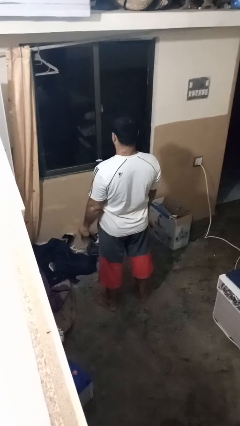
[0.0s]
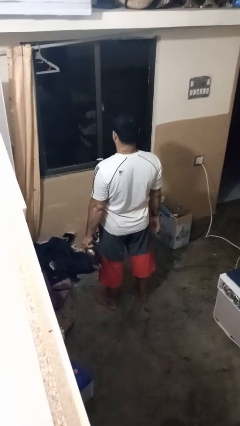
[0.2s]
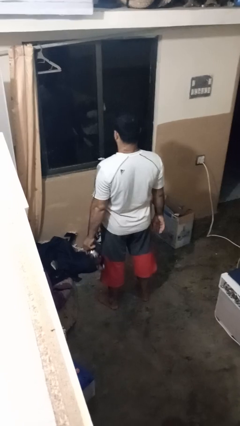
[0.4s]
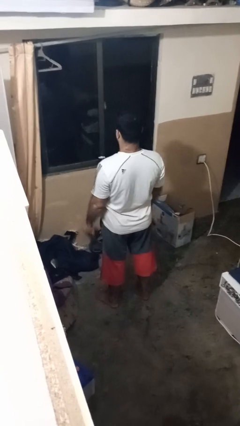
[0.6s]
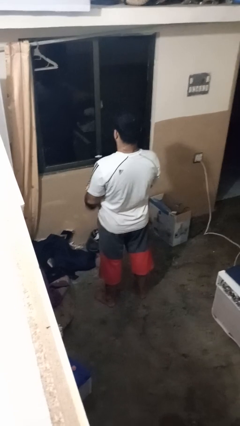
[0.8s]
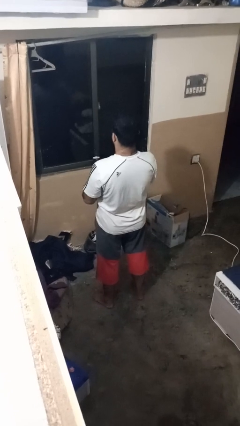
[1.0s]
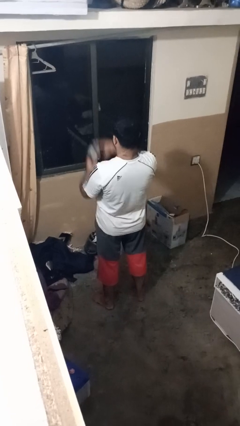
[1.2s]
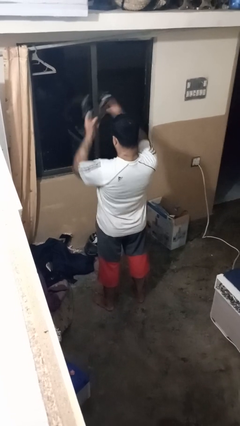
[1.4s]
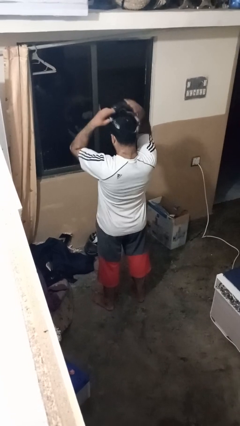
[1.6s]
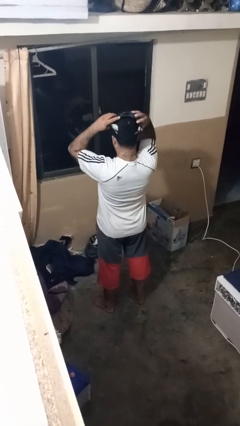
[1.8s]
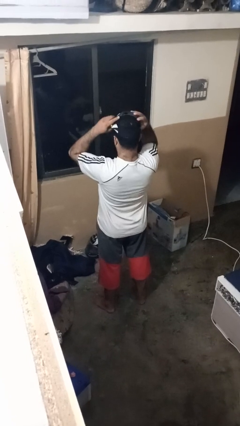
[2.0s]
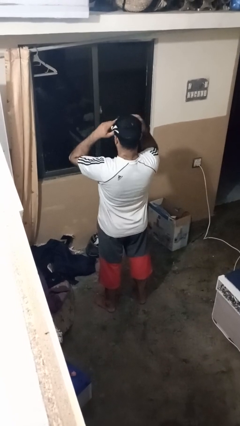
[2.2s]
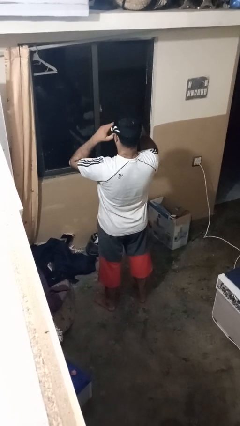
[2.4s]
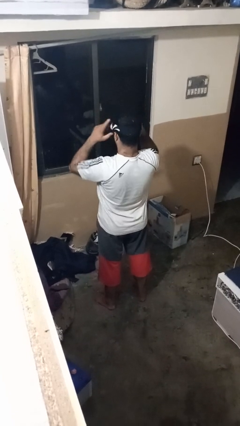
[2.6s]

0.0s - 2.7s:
person puts on sunglasses

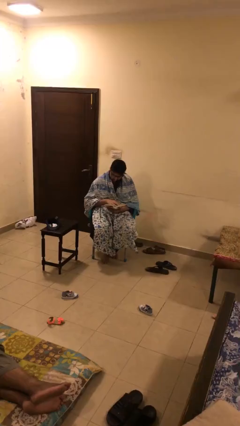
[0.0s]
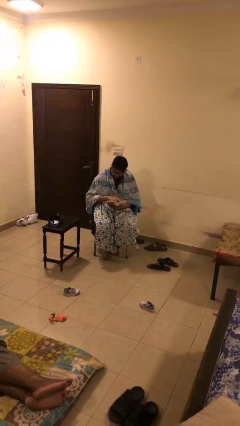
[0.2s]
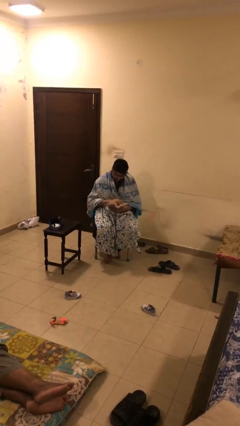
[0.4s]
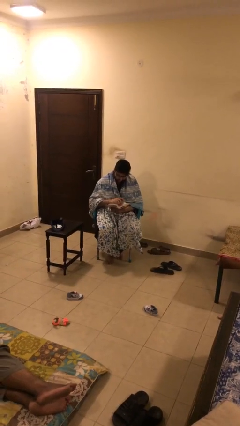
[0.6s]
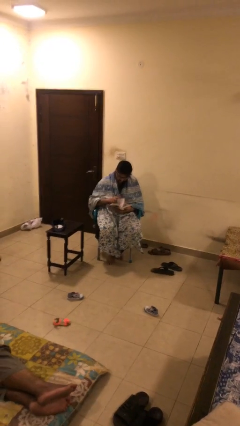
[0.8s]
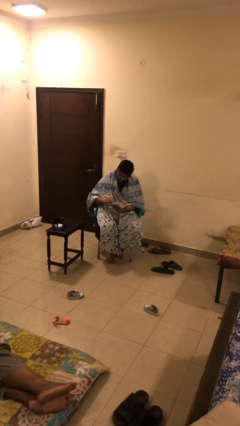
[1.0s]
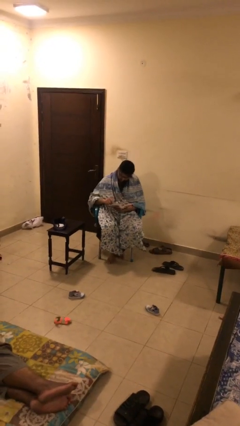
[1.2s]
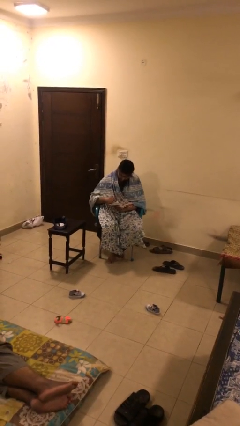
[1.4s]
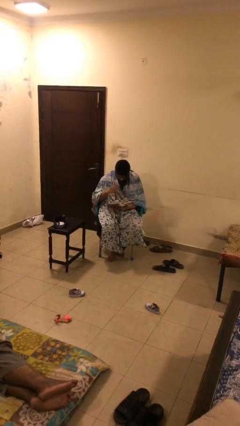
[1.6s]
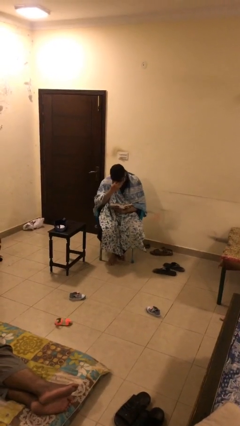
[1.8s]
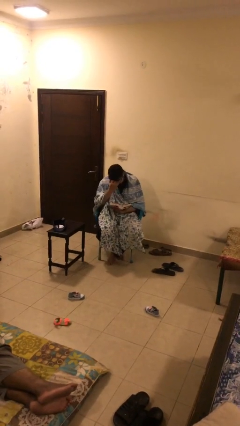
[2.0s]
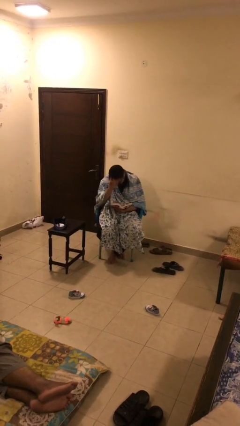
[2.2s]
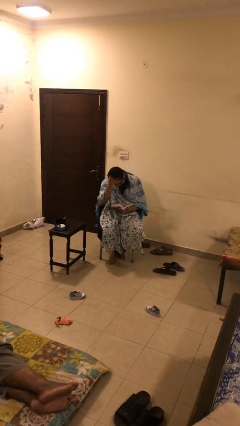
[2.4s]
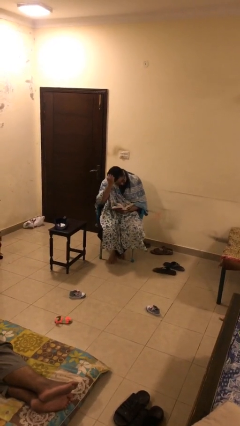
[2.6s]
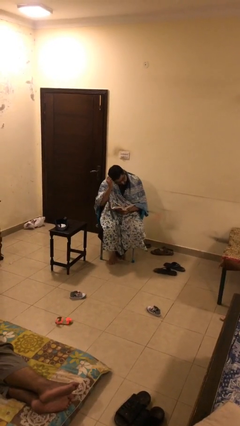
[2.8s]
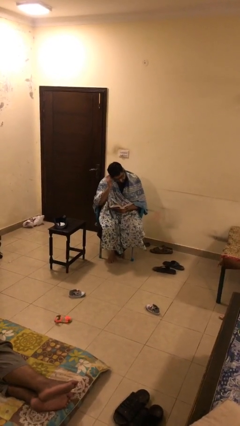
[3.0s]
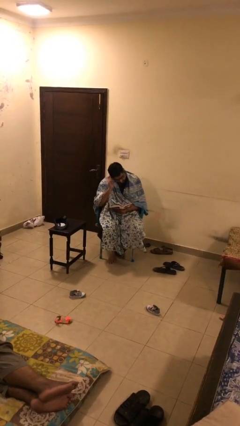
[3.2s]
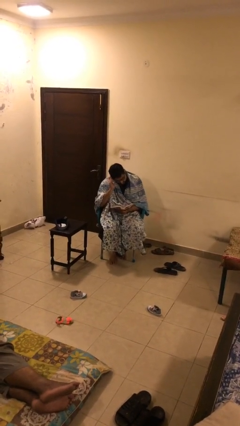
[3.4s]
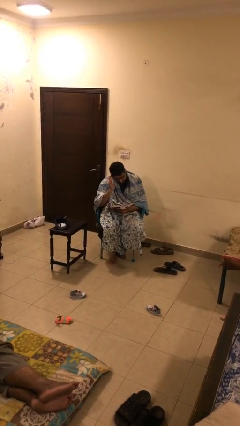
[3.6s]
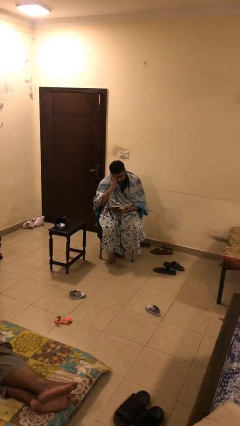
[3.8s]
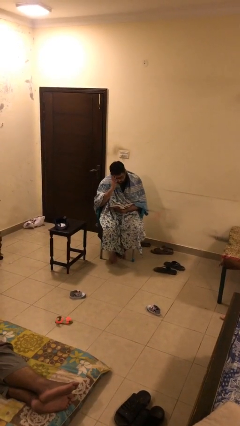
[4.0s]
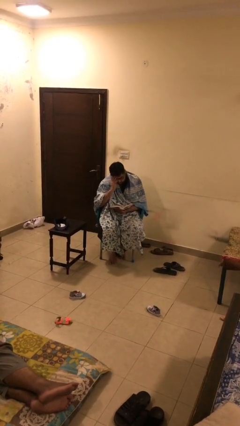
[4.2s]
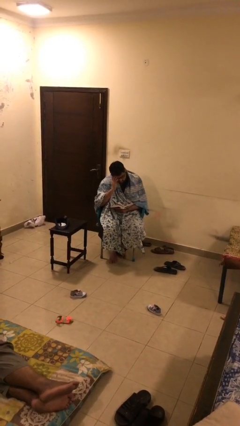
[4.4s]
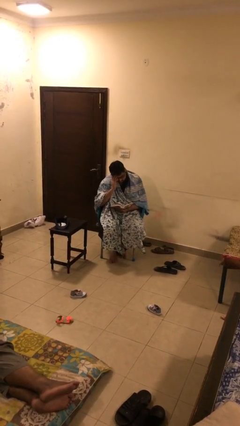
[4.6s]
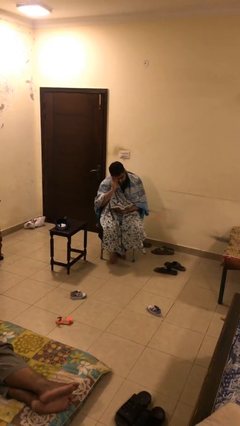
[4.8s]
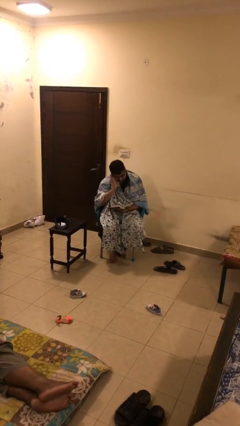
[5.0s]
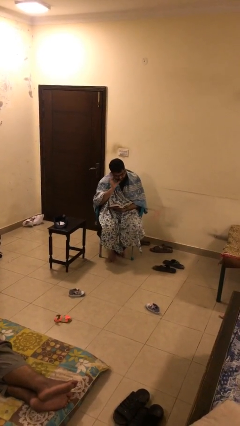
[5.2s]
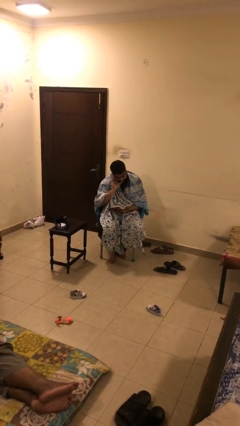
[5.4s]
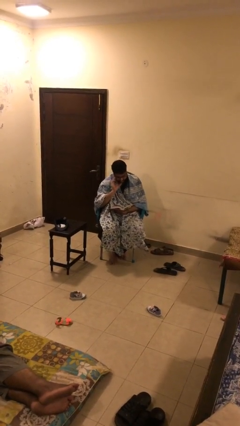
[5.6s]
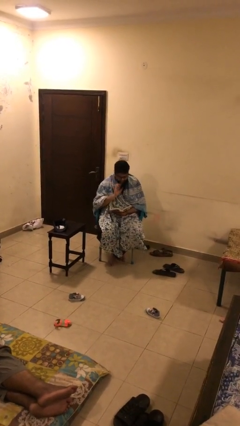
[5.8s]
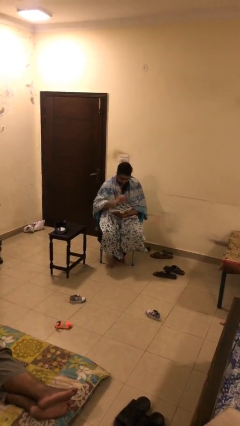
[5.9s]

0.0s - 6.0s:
person reads document

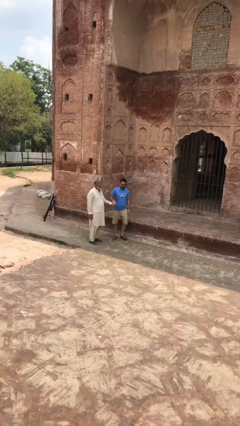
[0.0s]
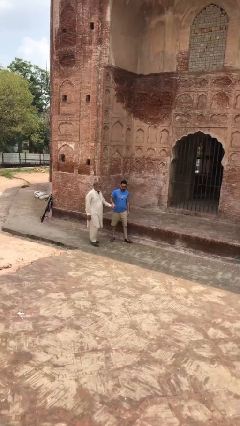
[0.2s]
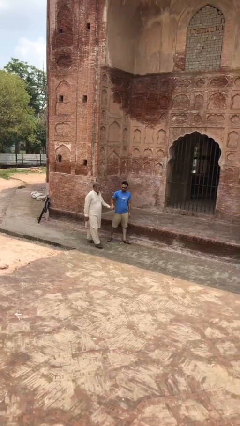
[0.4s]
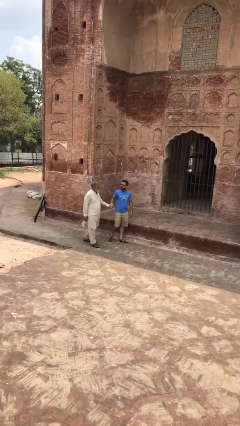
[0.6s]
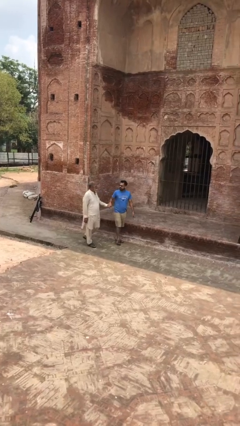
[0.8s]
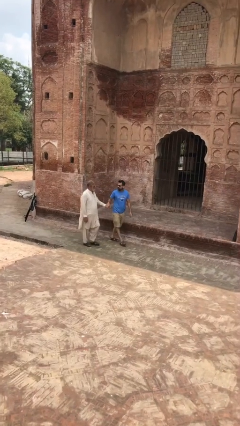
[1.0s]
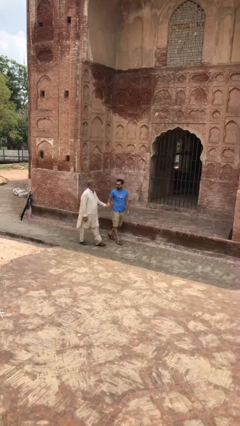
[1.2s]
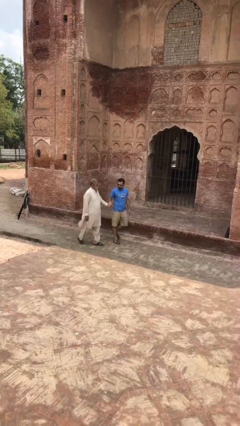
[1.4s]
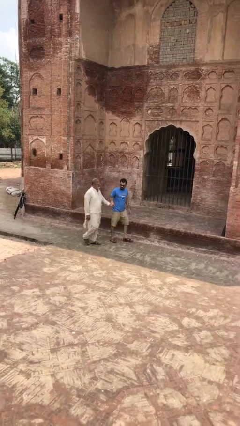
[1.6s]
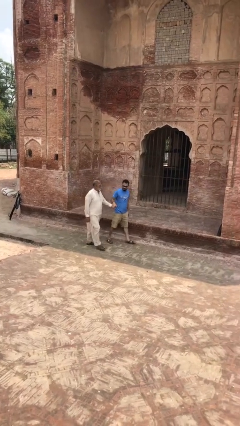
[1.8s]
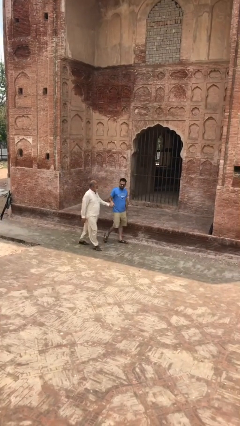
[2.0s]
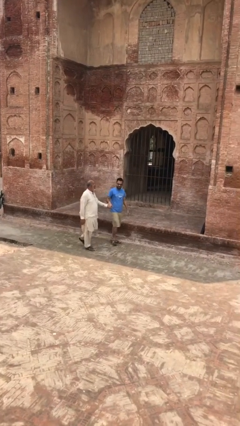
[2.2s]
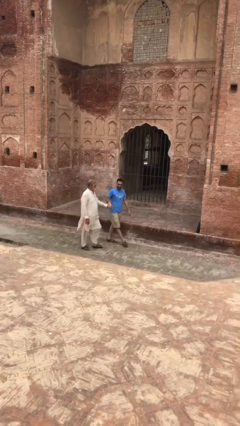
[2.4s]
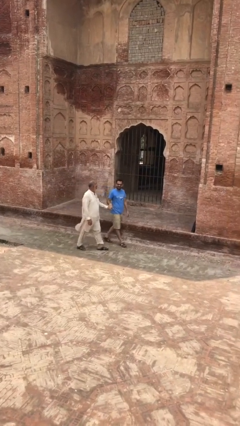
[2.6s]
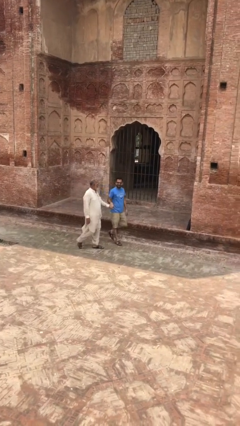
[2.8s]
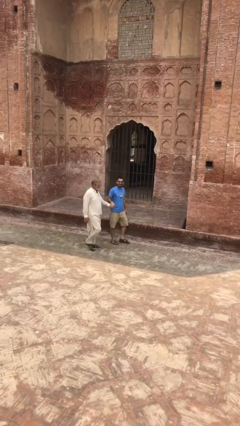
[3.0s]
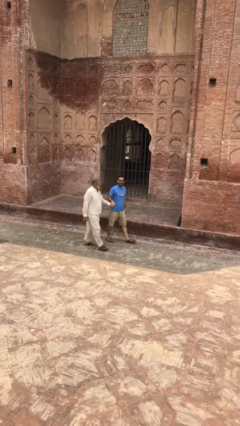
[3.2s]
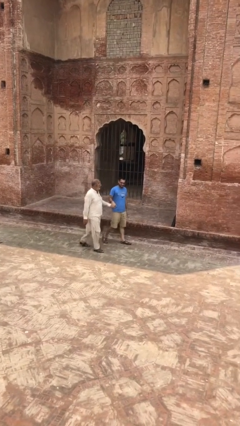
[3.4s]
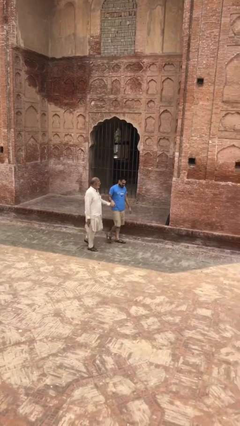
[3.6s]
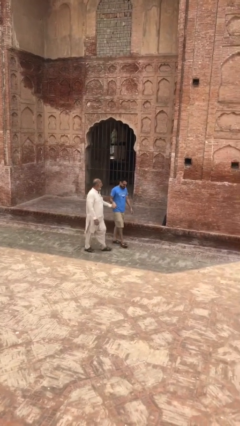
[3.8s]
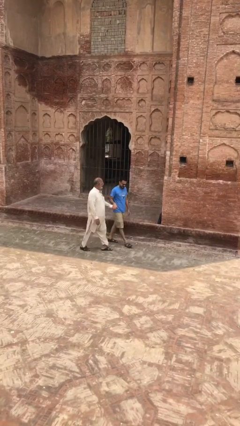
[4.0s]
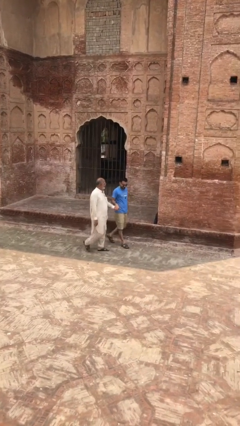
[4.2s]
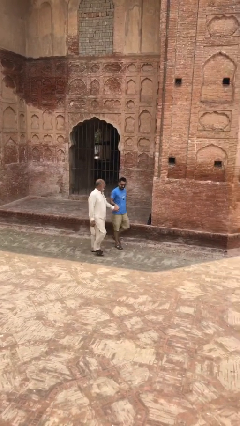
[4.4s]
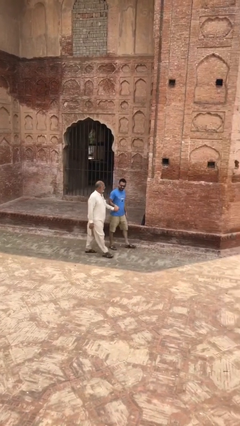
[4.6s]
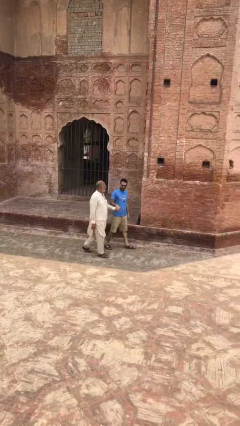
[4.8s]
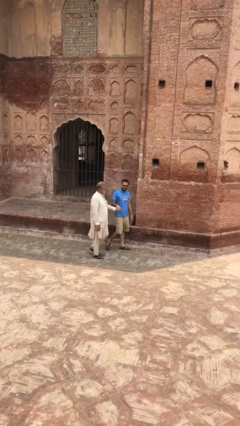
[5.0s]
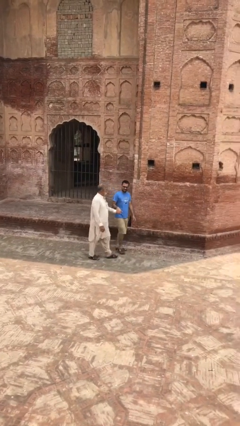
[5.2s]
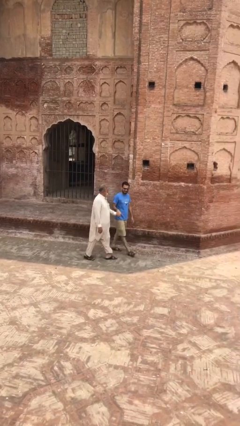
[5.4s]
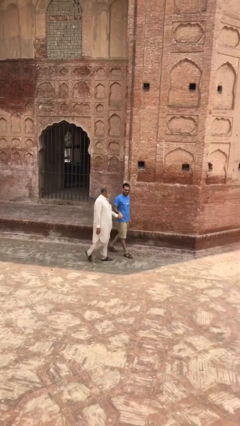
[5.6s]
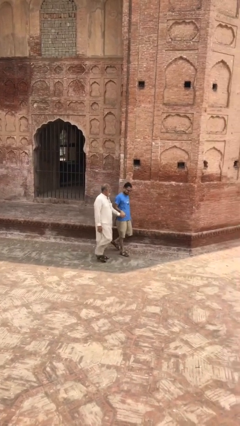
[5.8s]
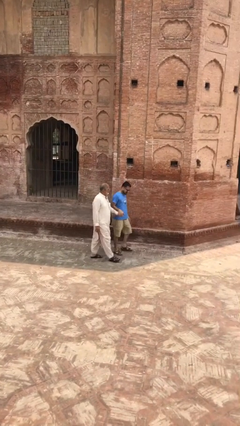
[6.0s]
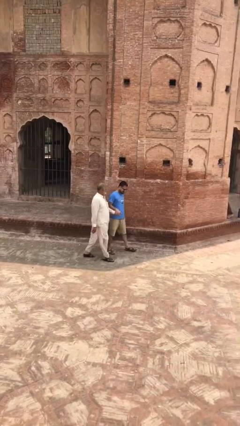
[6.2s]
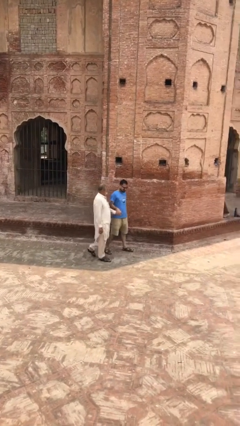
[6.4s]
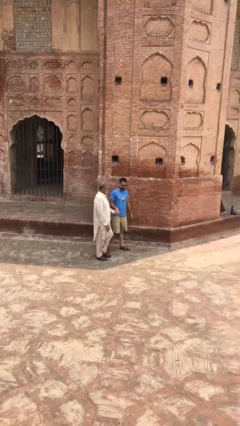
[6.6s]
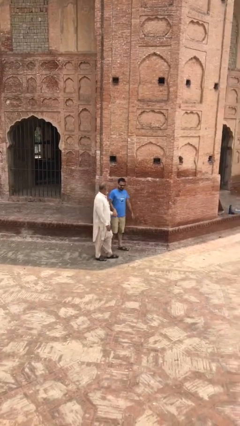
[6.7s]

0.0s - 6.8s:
person holds hand

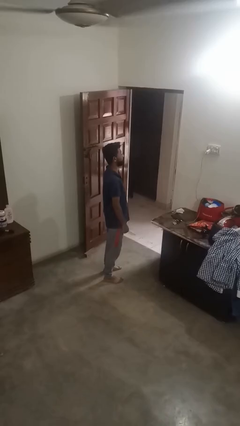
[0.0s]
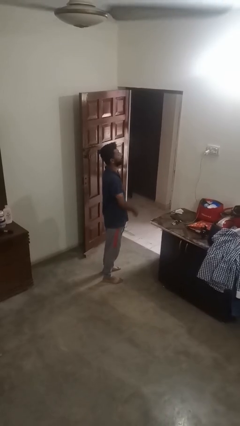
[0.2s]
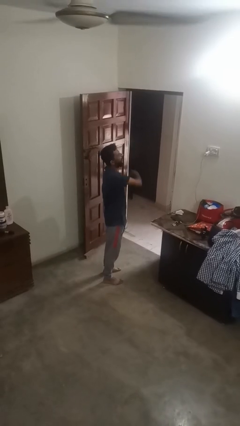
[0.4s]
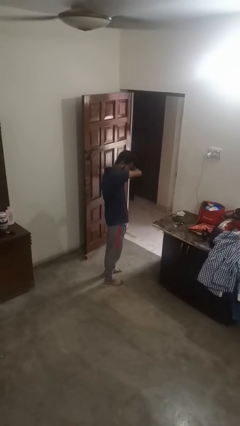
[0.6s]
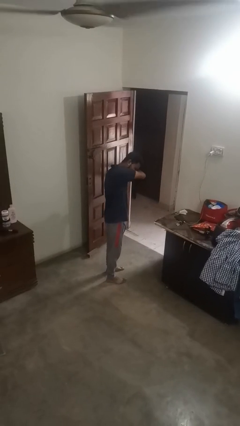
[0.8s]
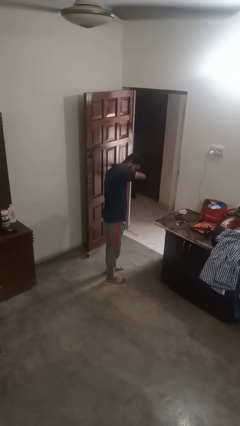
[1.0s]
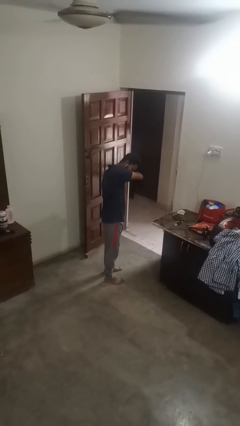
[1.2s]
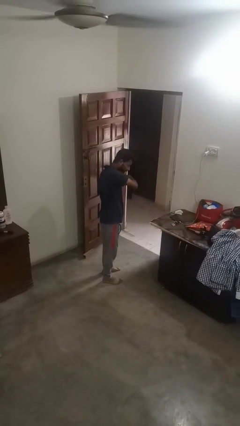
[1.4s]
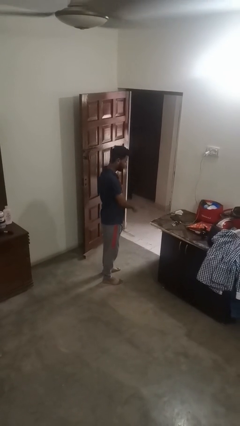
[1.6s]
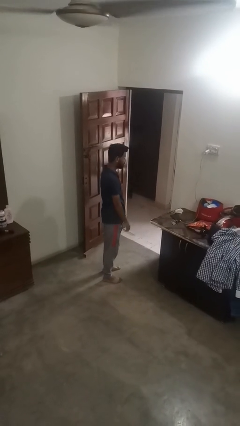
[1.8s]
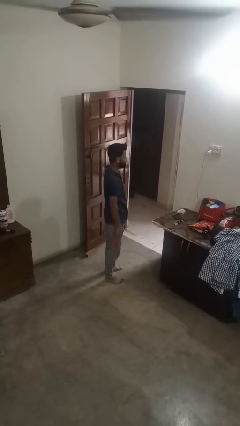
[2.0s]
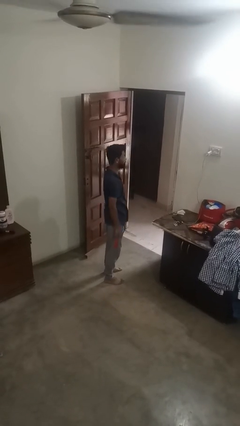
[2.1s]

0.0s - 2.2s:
person sneezes into arm

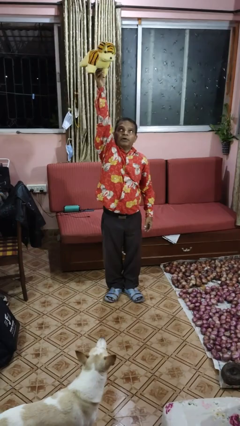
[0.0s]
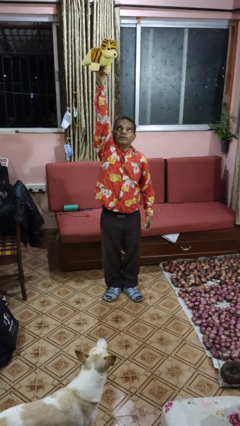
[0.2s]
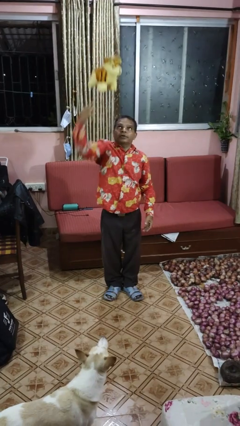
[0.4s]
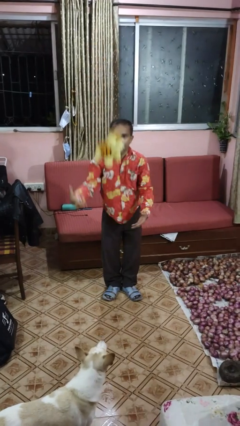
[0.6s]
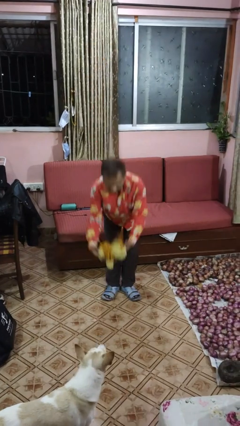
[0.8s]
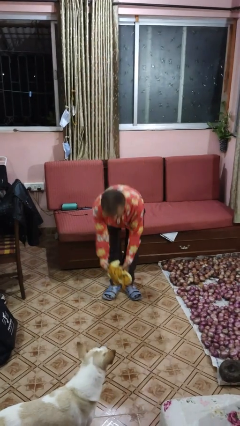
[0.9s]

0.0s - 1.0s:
person drops object
